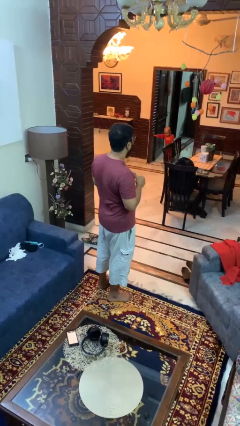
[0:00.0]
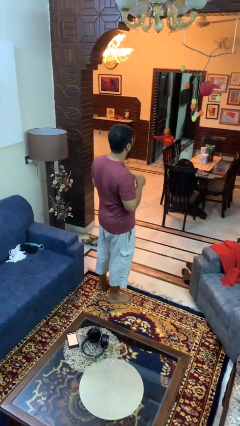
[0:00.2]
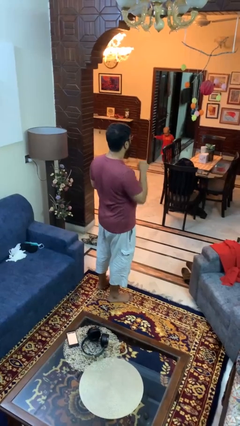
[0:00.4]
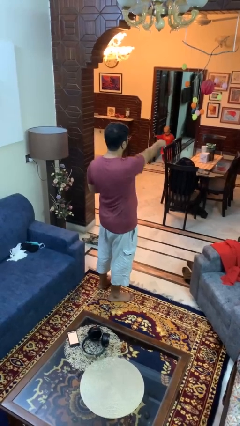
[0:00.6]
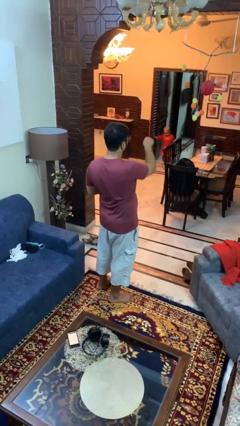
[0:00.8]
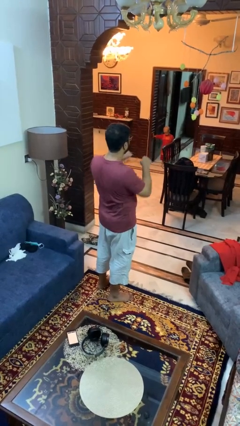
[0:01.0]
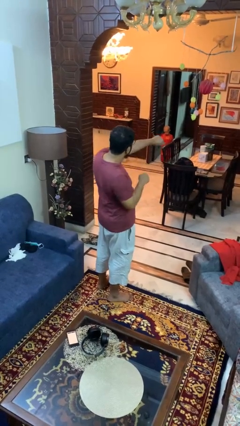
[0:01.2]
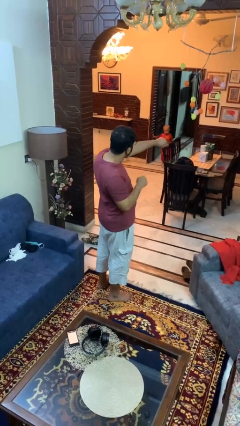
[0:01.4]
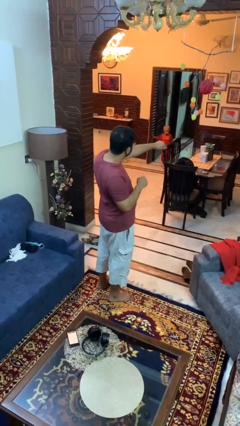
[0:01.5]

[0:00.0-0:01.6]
person punches

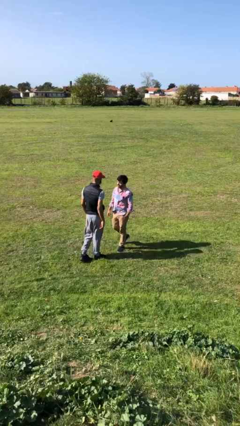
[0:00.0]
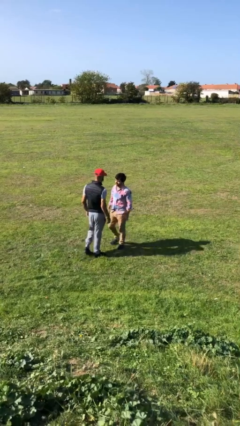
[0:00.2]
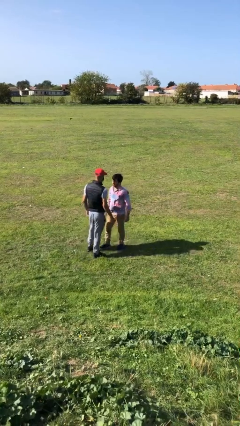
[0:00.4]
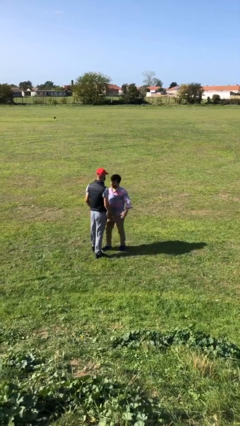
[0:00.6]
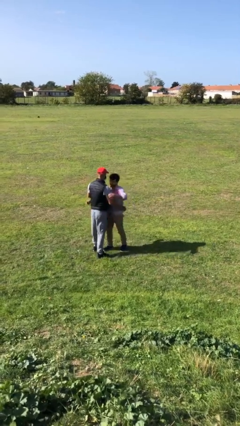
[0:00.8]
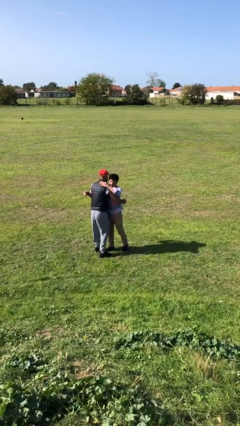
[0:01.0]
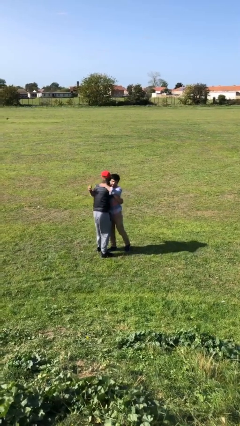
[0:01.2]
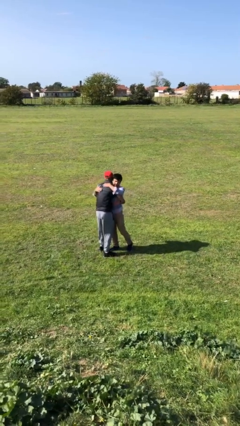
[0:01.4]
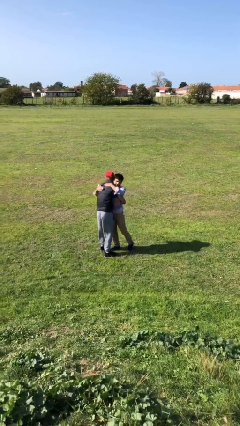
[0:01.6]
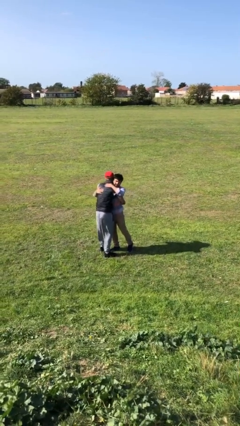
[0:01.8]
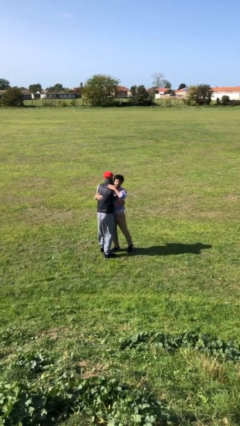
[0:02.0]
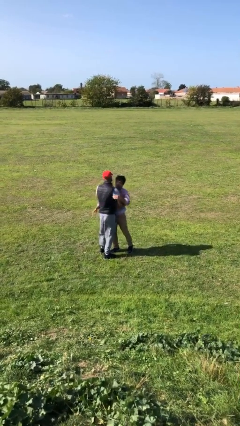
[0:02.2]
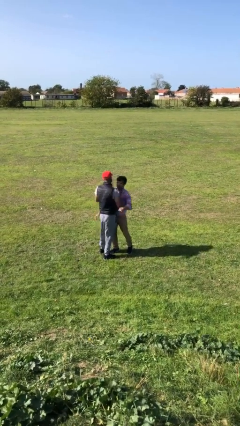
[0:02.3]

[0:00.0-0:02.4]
person embraces person

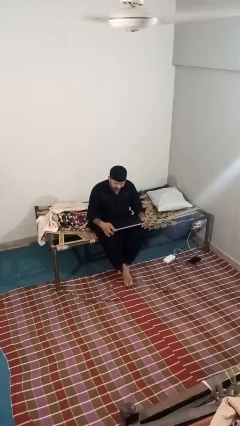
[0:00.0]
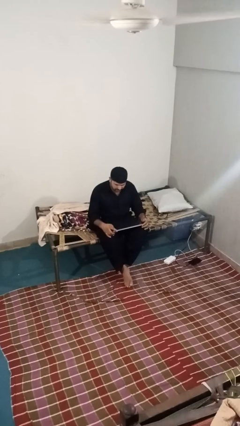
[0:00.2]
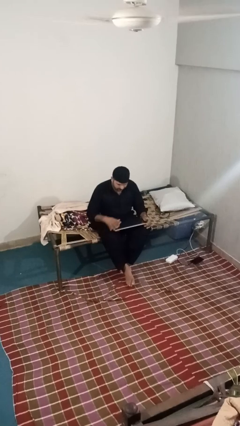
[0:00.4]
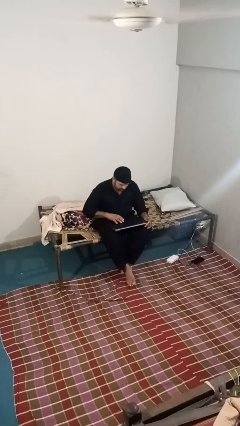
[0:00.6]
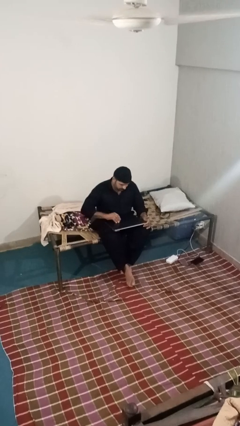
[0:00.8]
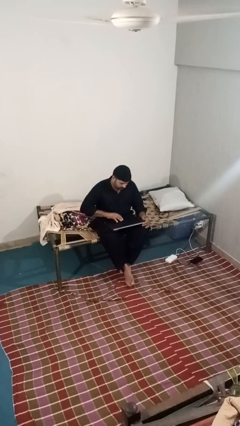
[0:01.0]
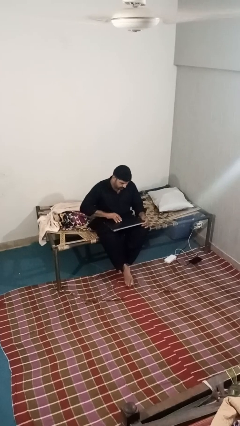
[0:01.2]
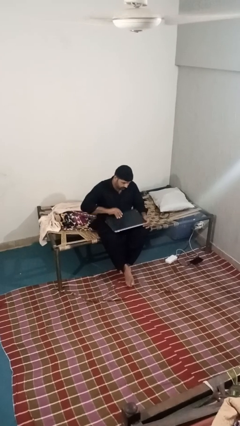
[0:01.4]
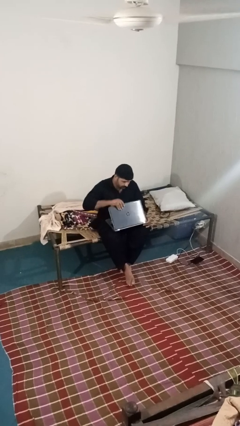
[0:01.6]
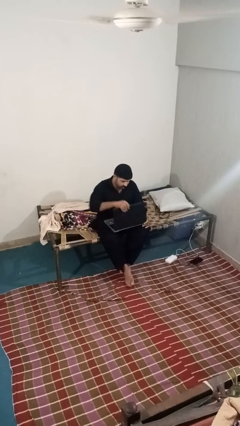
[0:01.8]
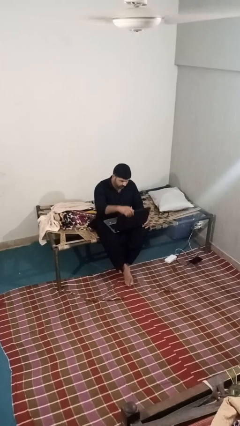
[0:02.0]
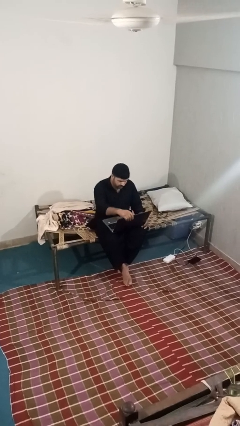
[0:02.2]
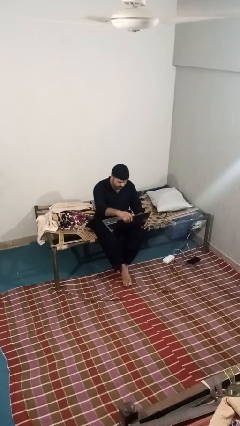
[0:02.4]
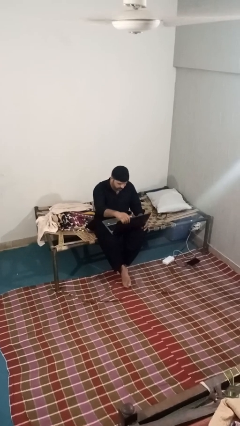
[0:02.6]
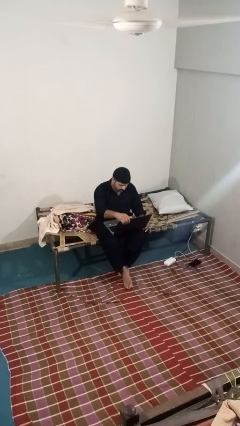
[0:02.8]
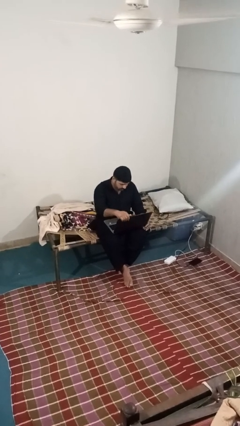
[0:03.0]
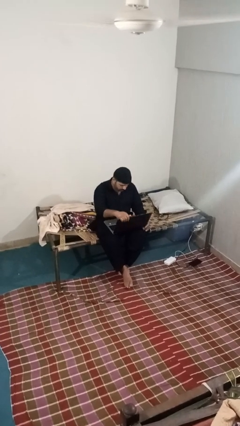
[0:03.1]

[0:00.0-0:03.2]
person opens laptop

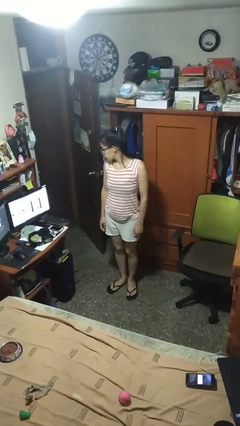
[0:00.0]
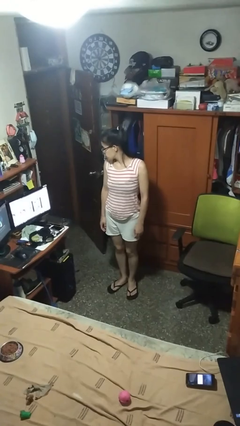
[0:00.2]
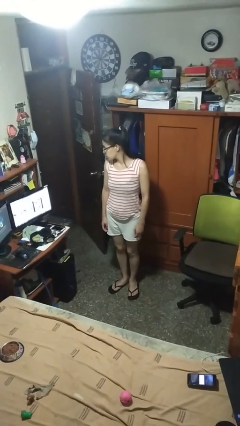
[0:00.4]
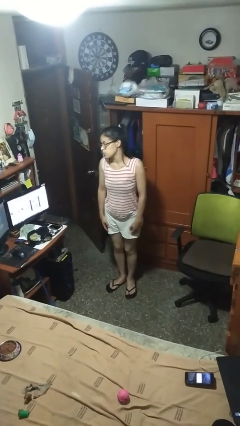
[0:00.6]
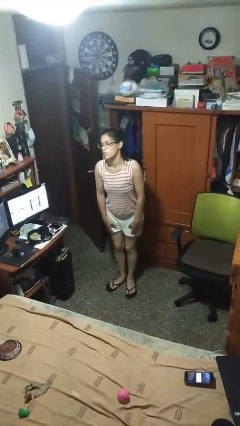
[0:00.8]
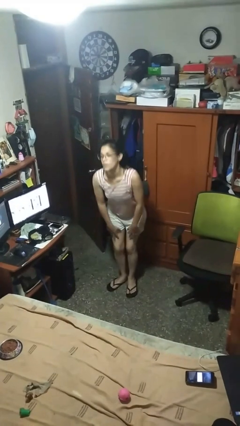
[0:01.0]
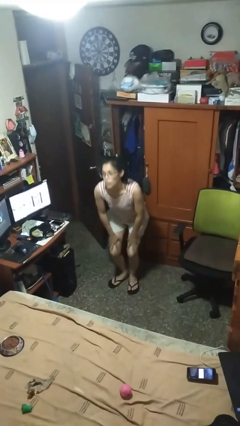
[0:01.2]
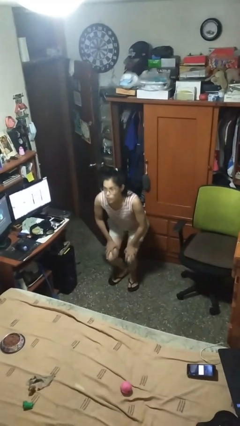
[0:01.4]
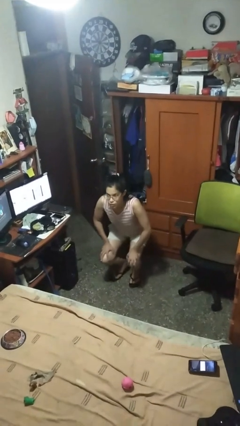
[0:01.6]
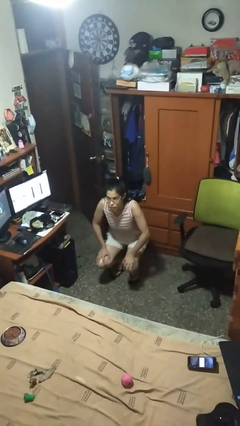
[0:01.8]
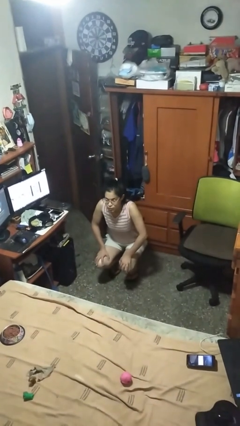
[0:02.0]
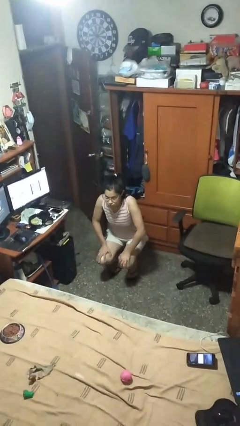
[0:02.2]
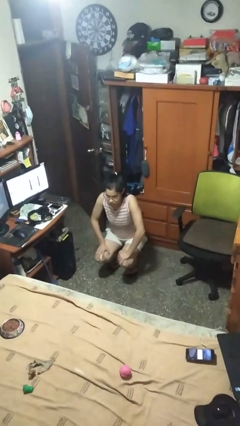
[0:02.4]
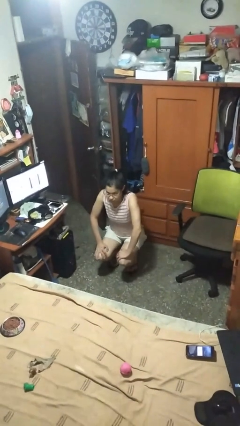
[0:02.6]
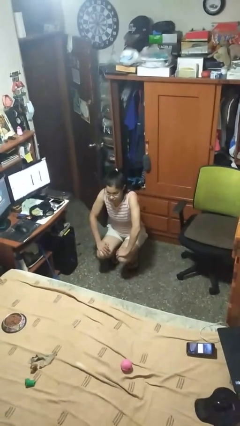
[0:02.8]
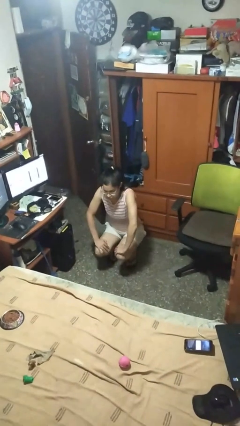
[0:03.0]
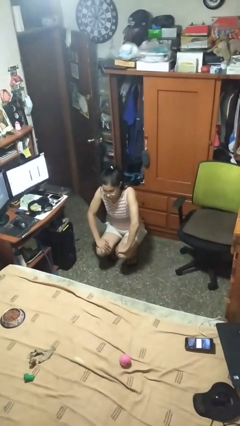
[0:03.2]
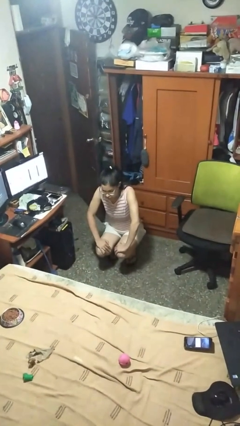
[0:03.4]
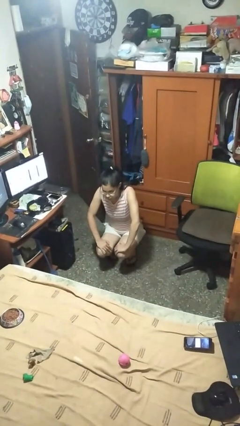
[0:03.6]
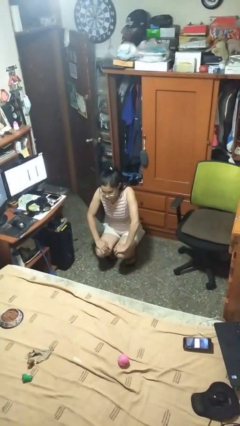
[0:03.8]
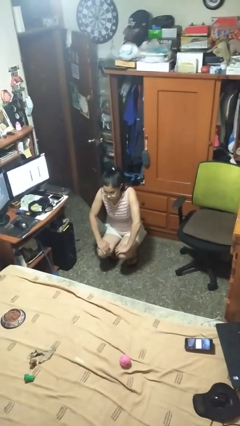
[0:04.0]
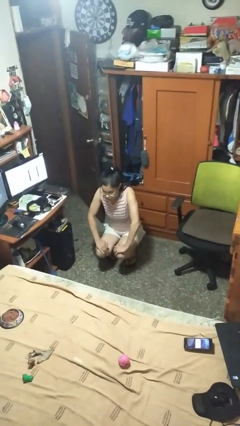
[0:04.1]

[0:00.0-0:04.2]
person squats

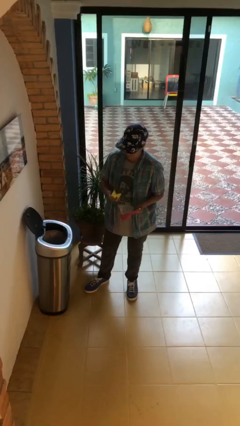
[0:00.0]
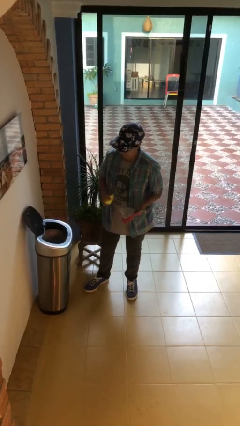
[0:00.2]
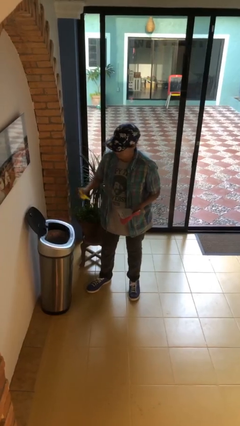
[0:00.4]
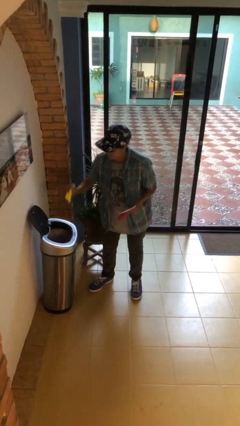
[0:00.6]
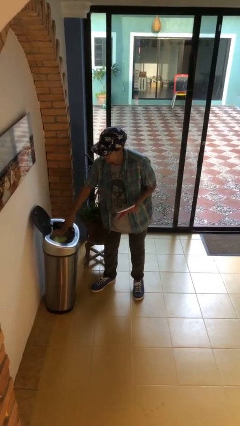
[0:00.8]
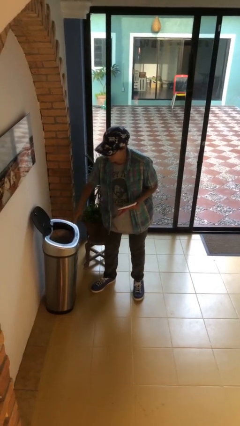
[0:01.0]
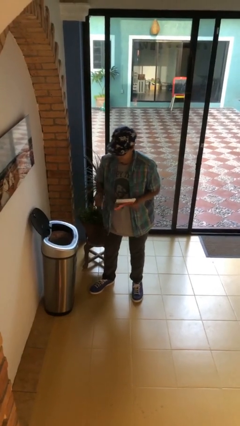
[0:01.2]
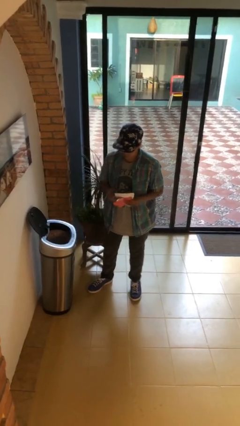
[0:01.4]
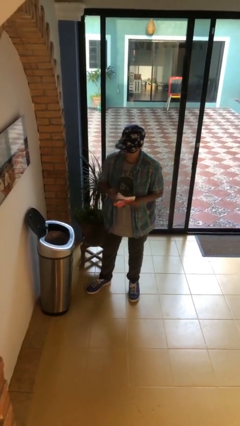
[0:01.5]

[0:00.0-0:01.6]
person discards trash

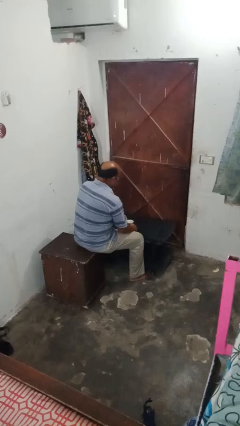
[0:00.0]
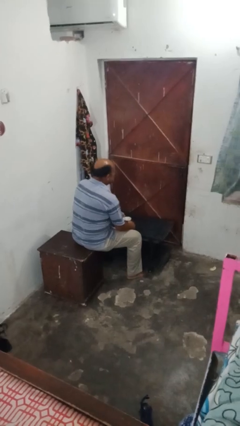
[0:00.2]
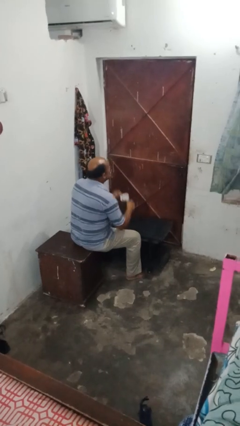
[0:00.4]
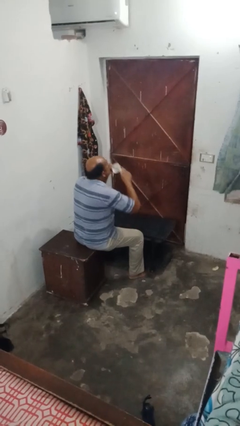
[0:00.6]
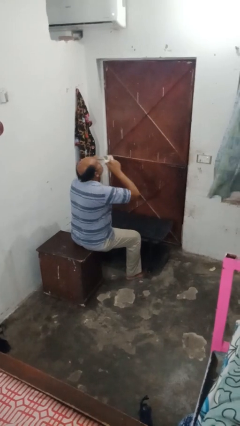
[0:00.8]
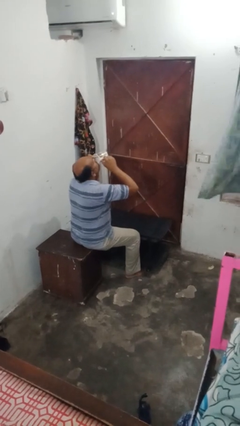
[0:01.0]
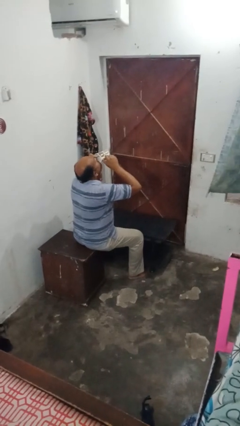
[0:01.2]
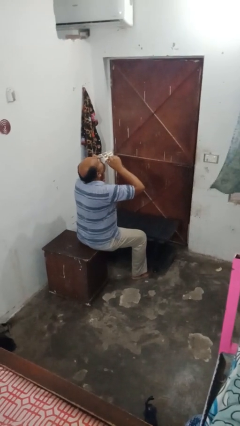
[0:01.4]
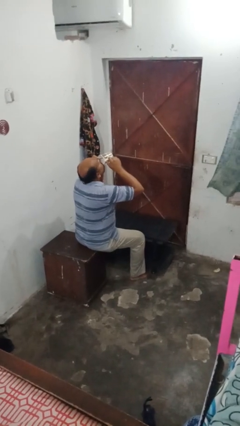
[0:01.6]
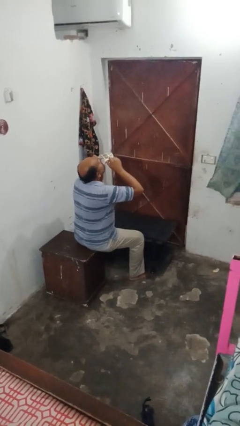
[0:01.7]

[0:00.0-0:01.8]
person drinks from mug

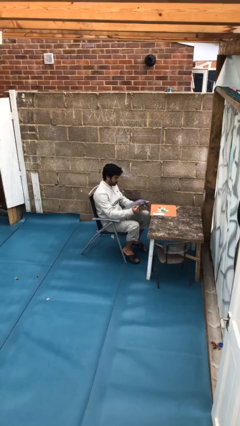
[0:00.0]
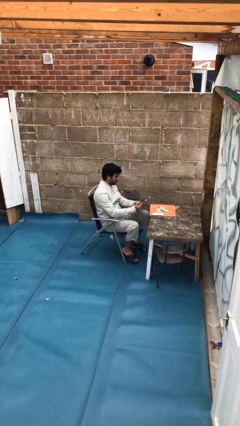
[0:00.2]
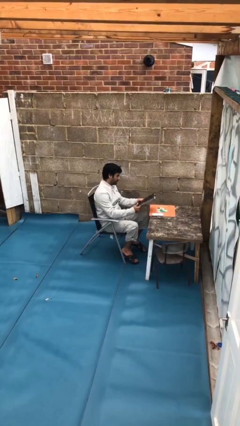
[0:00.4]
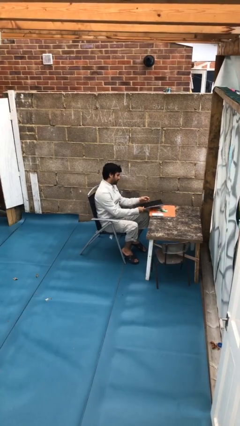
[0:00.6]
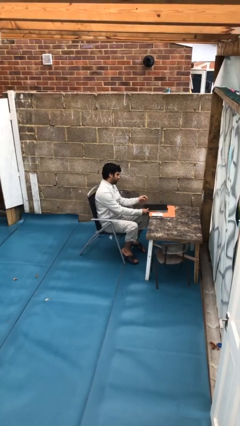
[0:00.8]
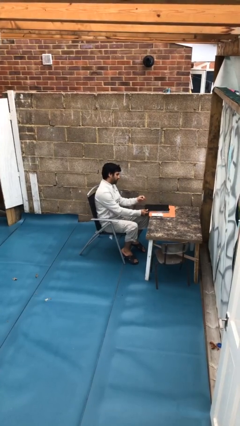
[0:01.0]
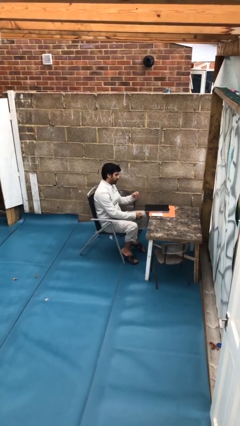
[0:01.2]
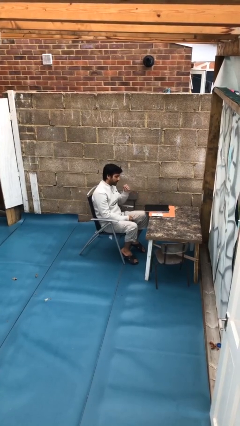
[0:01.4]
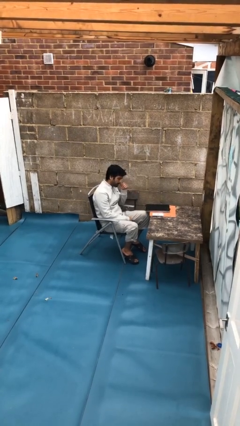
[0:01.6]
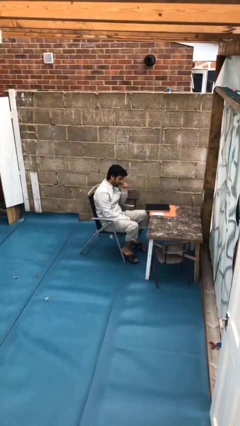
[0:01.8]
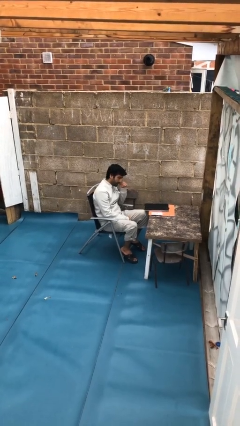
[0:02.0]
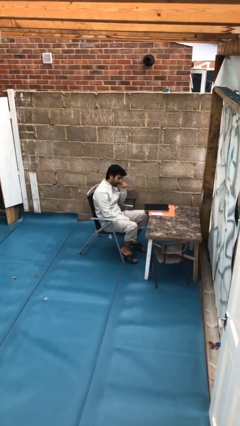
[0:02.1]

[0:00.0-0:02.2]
person puts down object on table

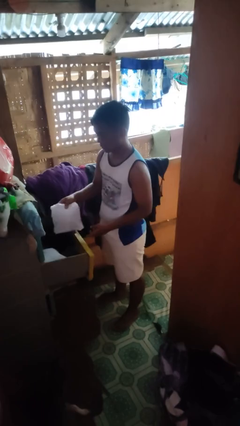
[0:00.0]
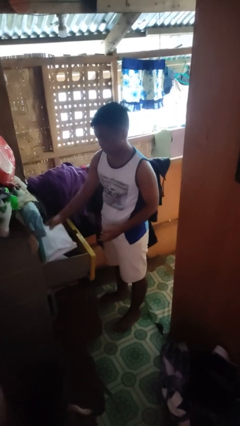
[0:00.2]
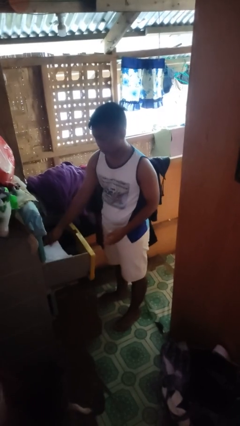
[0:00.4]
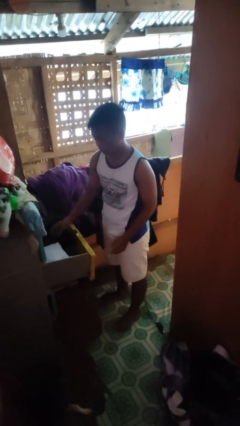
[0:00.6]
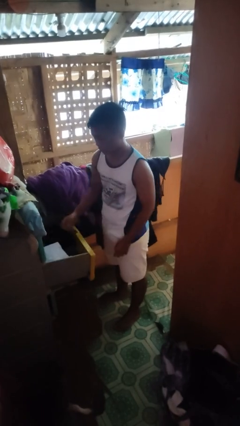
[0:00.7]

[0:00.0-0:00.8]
person puts clothes into dresser
